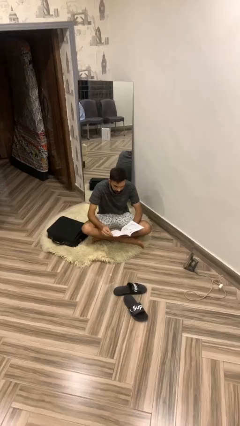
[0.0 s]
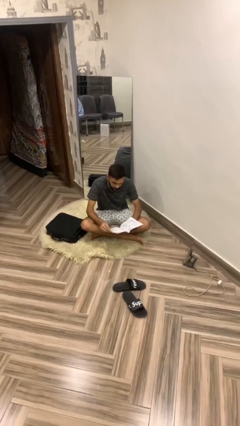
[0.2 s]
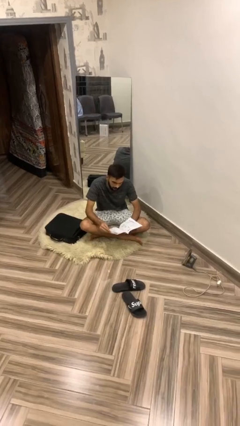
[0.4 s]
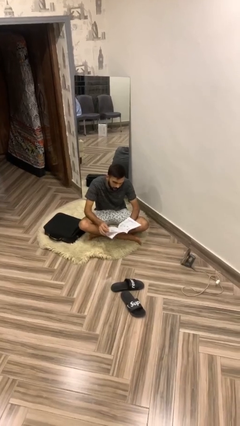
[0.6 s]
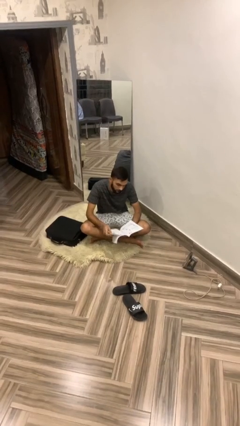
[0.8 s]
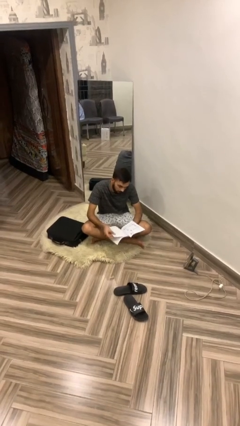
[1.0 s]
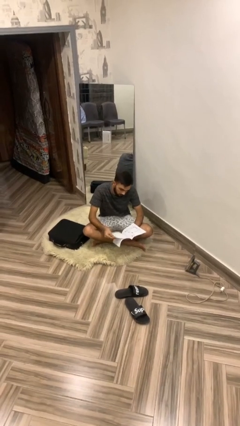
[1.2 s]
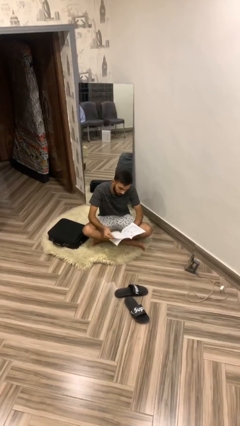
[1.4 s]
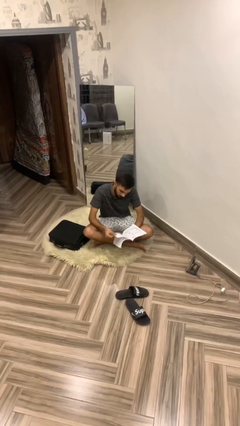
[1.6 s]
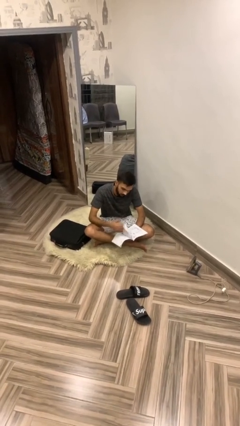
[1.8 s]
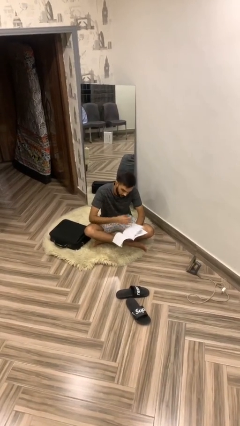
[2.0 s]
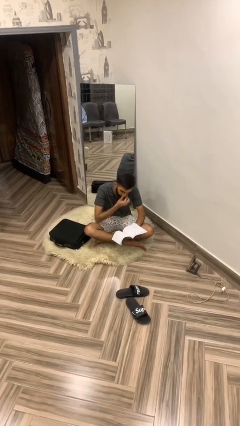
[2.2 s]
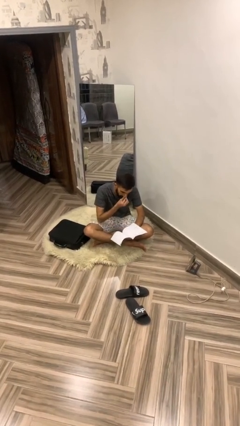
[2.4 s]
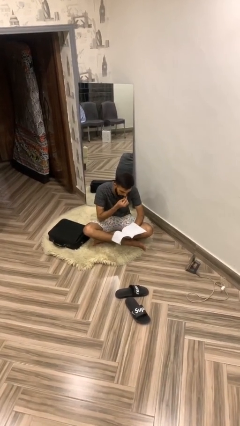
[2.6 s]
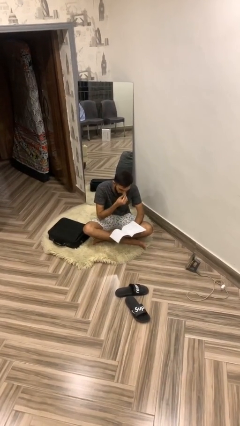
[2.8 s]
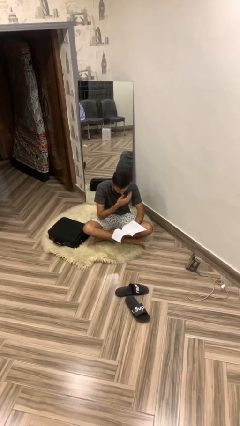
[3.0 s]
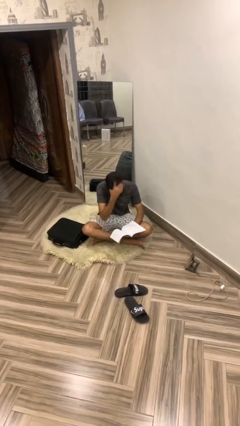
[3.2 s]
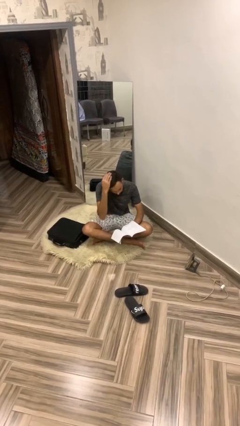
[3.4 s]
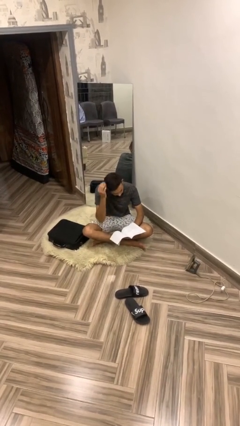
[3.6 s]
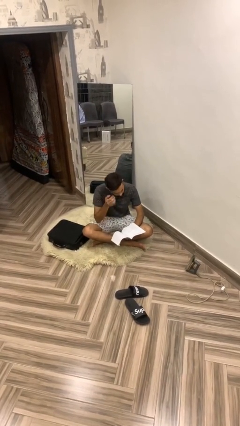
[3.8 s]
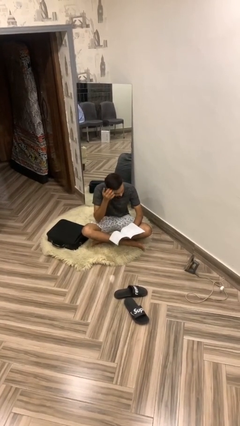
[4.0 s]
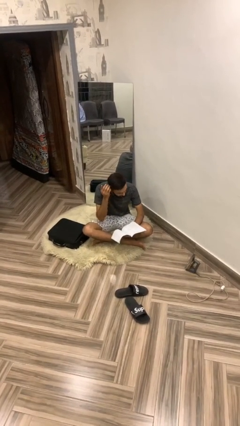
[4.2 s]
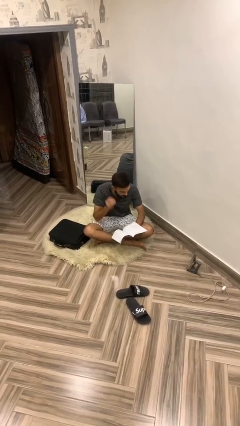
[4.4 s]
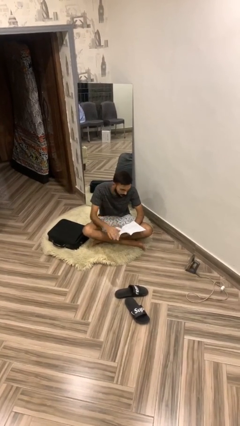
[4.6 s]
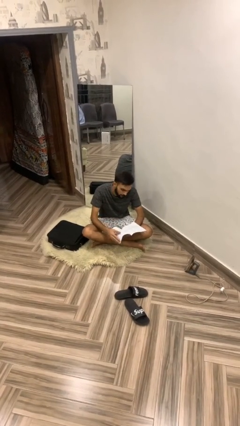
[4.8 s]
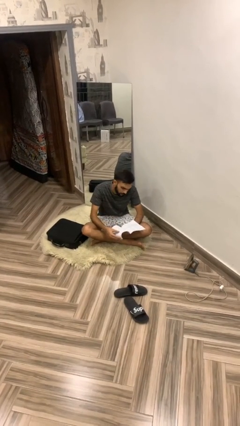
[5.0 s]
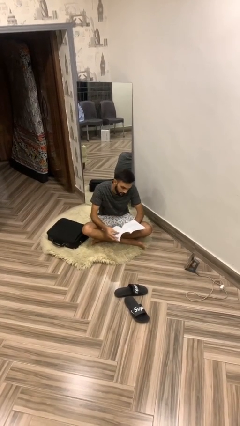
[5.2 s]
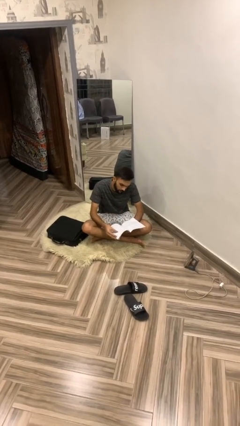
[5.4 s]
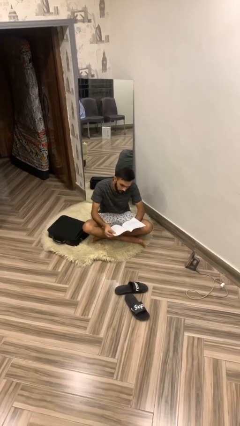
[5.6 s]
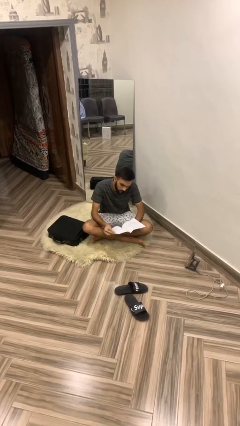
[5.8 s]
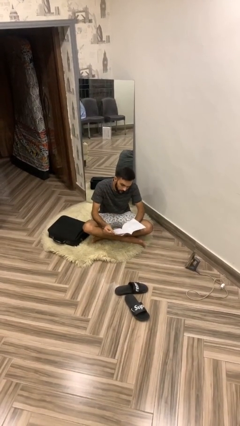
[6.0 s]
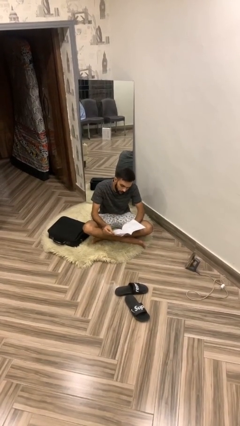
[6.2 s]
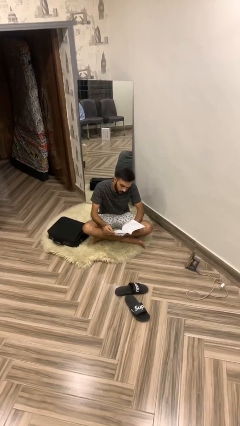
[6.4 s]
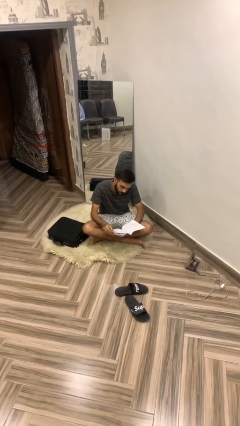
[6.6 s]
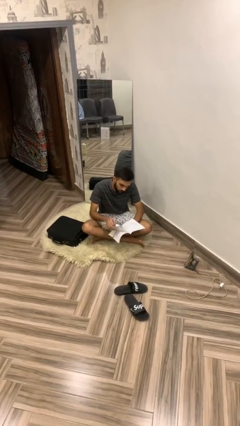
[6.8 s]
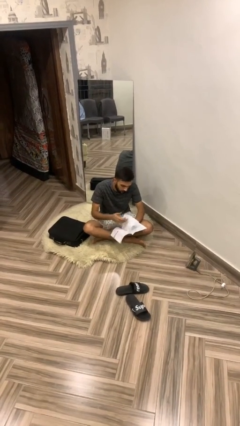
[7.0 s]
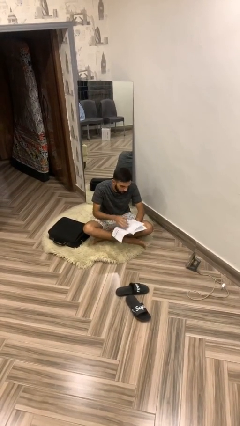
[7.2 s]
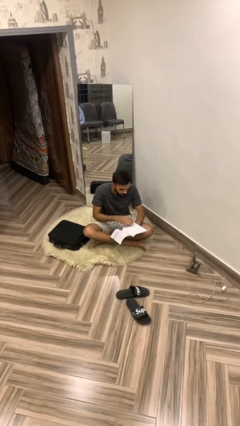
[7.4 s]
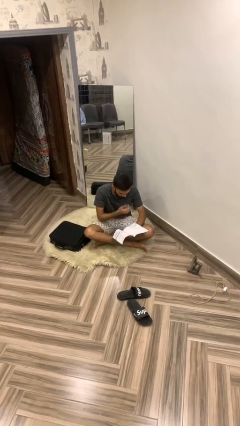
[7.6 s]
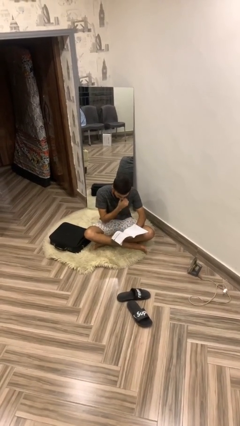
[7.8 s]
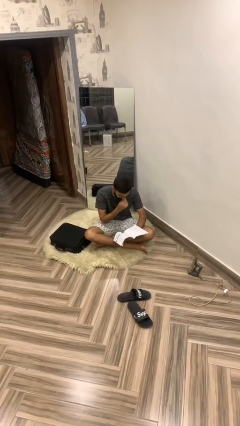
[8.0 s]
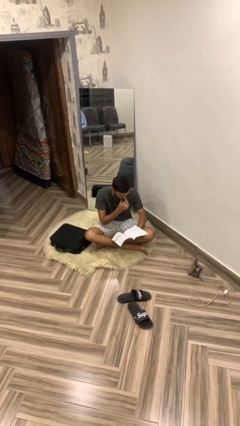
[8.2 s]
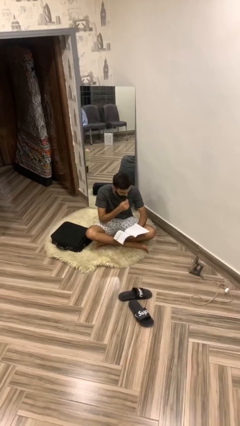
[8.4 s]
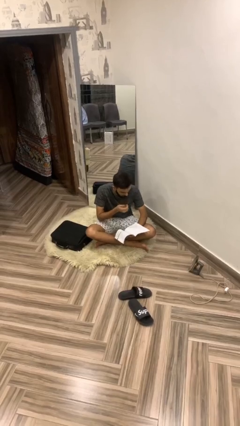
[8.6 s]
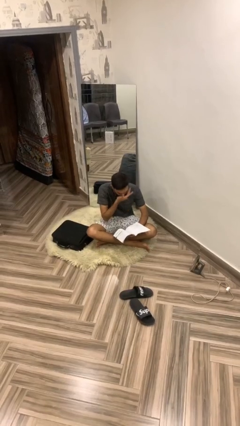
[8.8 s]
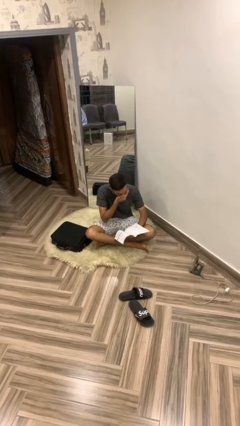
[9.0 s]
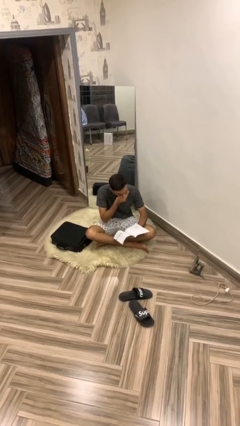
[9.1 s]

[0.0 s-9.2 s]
person reads document

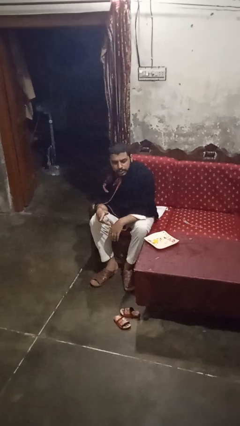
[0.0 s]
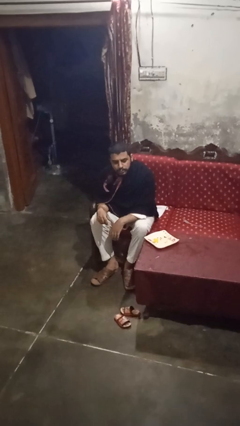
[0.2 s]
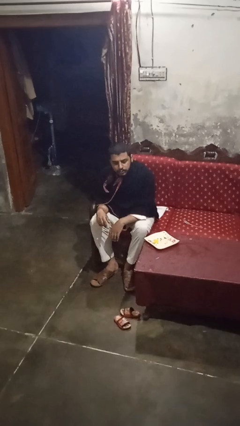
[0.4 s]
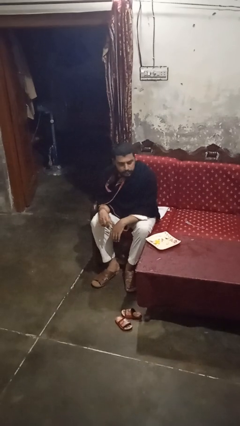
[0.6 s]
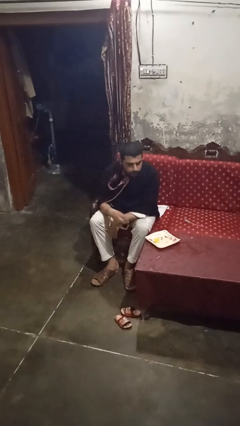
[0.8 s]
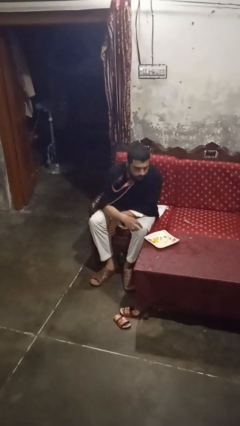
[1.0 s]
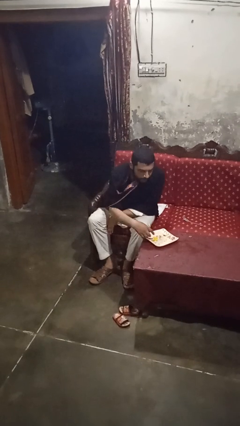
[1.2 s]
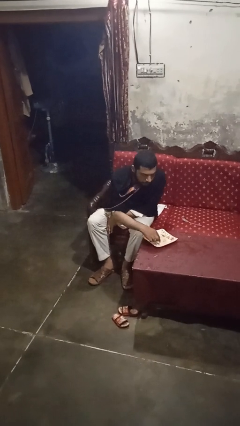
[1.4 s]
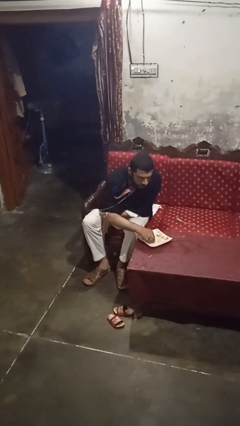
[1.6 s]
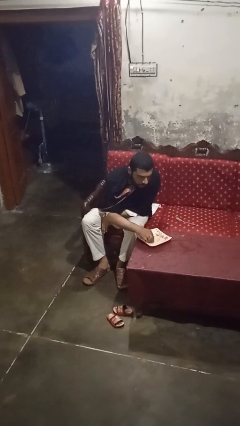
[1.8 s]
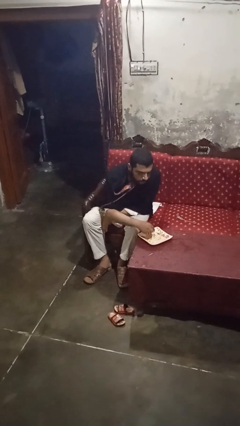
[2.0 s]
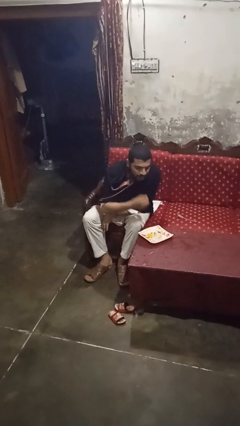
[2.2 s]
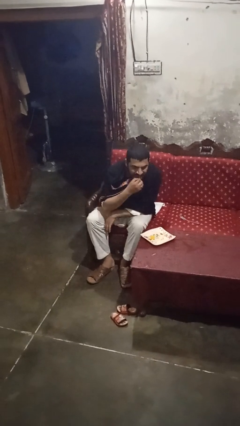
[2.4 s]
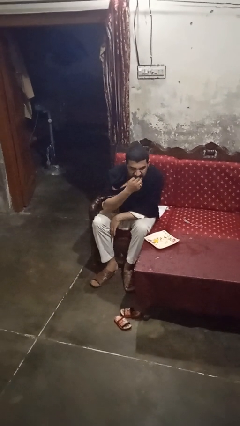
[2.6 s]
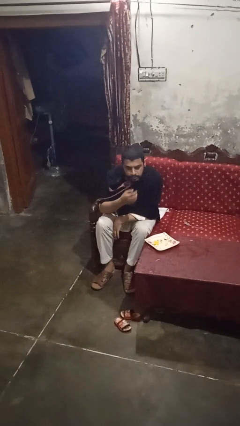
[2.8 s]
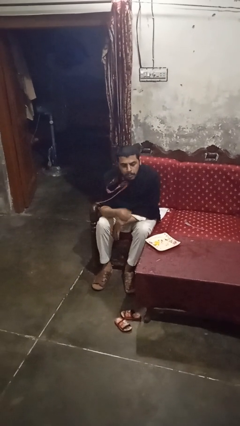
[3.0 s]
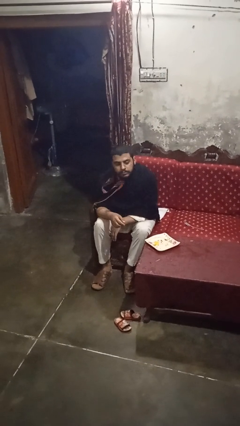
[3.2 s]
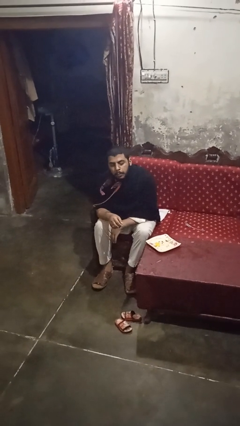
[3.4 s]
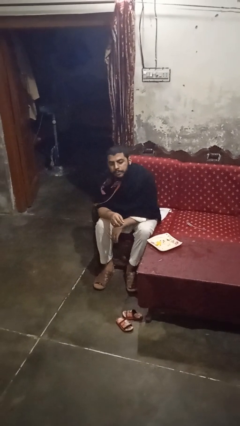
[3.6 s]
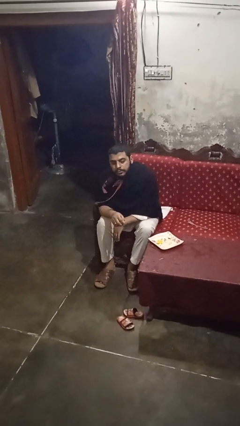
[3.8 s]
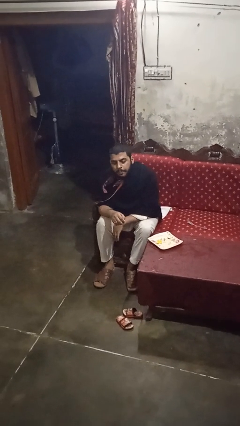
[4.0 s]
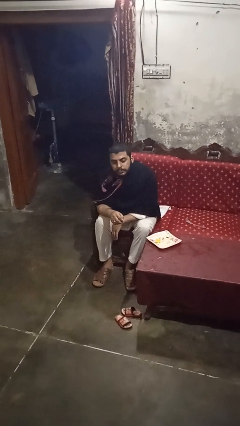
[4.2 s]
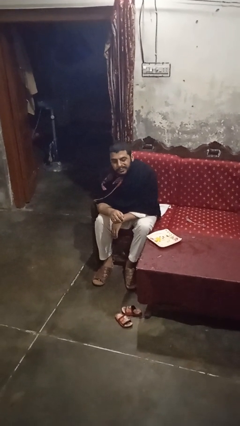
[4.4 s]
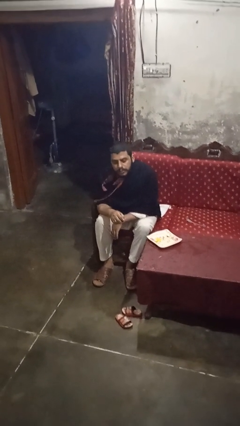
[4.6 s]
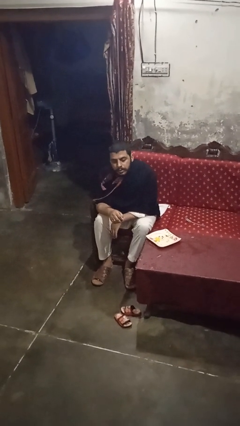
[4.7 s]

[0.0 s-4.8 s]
person eats with hands

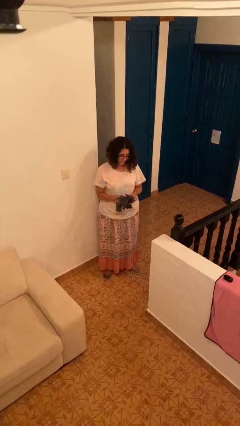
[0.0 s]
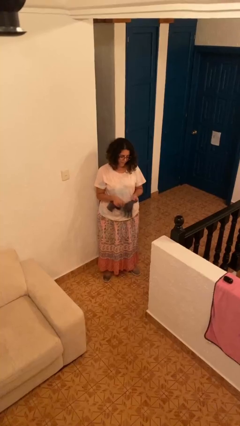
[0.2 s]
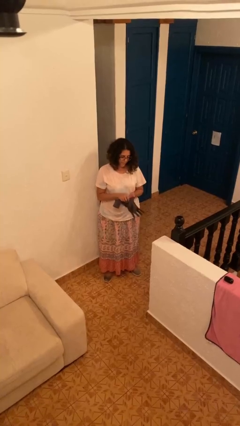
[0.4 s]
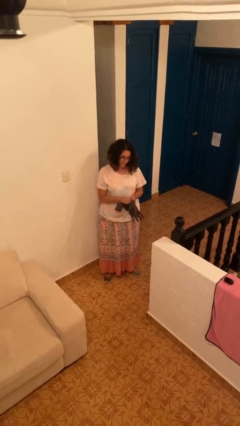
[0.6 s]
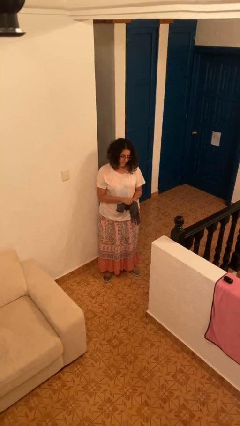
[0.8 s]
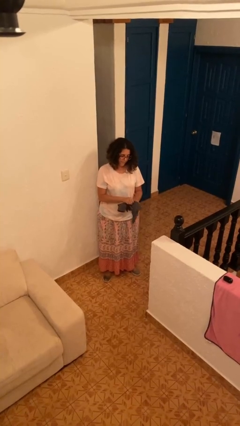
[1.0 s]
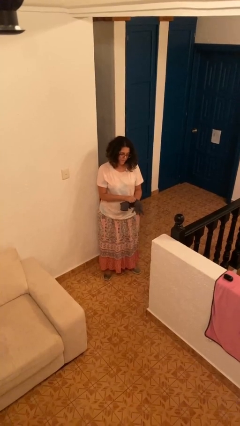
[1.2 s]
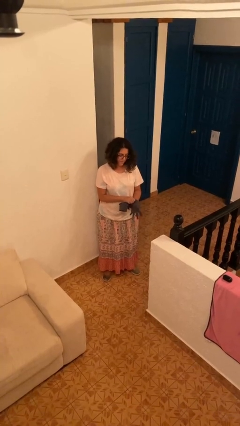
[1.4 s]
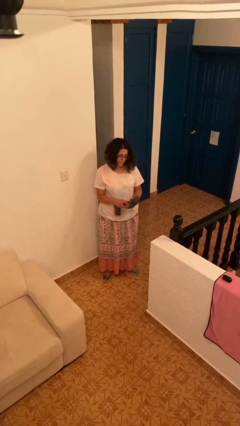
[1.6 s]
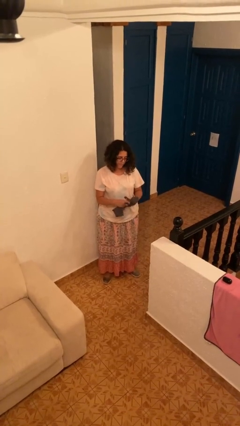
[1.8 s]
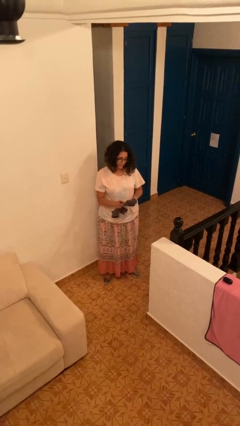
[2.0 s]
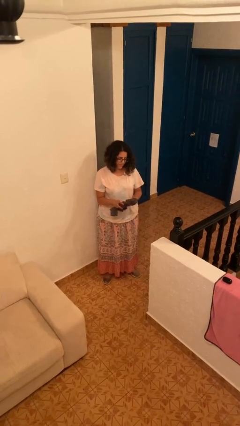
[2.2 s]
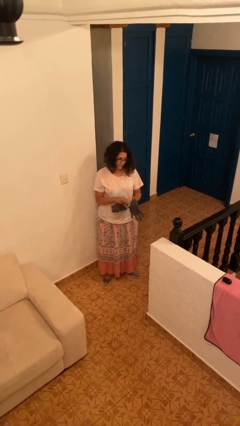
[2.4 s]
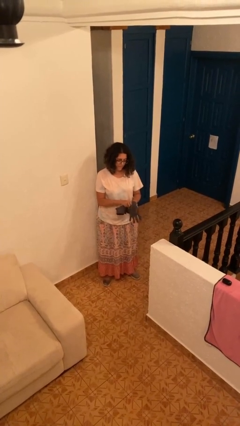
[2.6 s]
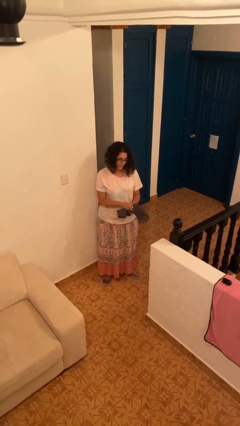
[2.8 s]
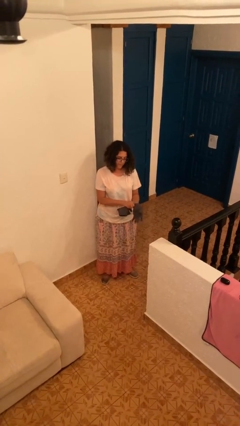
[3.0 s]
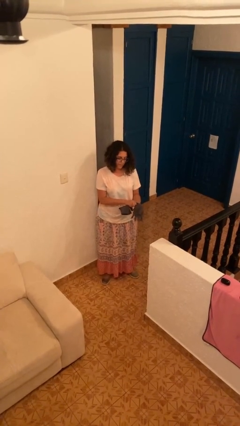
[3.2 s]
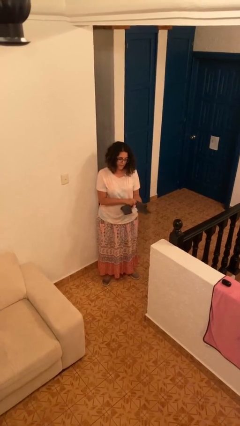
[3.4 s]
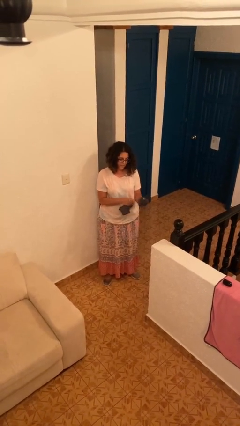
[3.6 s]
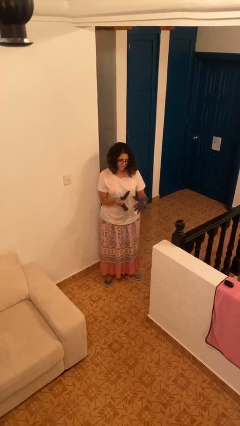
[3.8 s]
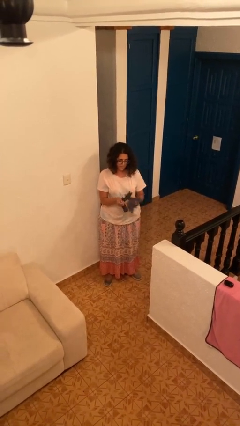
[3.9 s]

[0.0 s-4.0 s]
person puts on gloves
